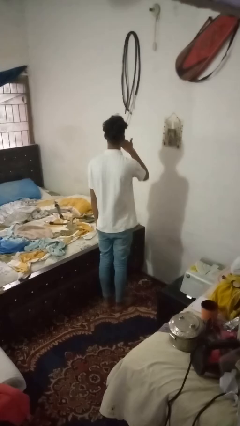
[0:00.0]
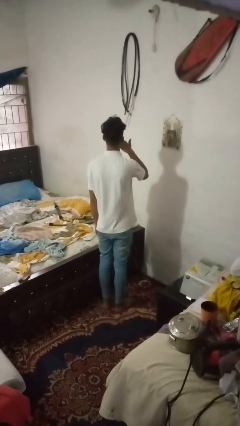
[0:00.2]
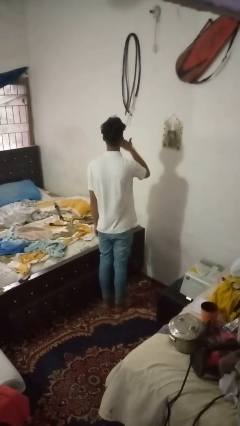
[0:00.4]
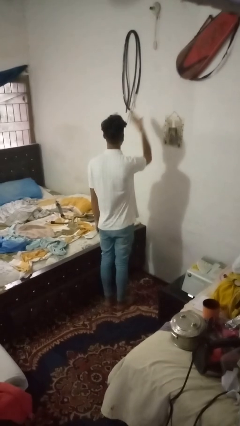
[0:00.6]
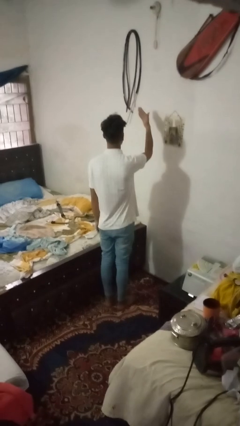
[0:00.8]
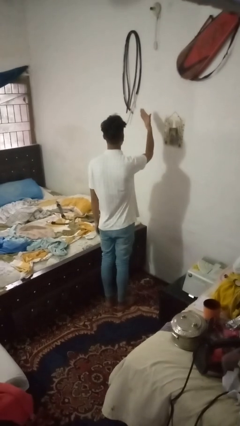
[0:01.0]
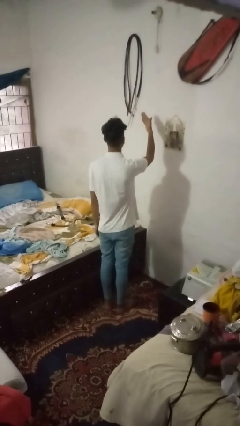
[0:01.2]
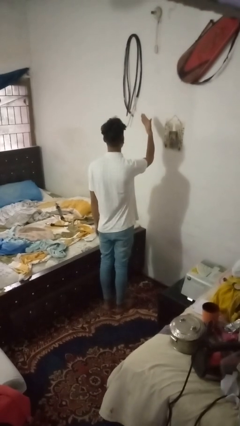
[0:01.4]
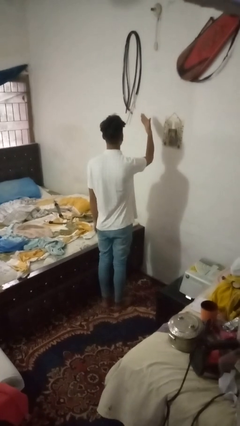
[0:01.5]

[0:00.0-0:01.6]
person gestures blow kiss

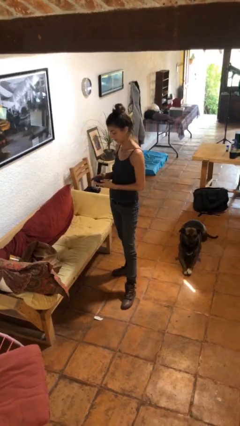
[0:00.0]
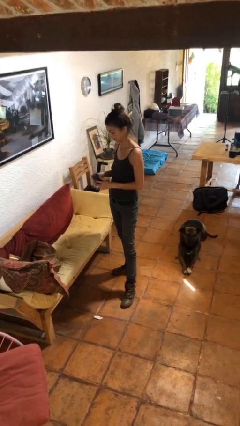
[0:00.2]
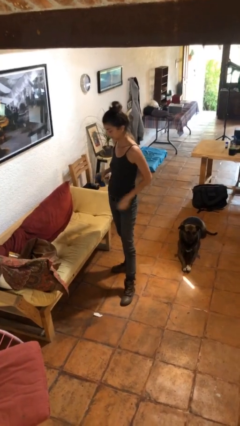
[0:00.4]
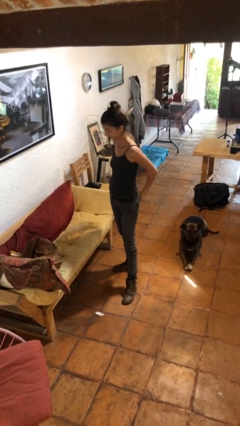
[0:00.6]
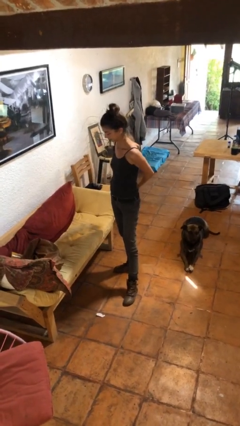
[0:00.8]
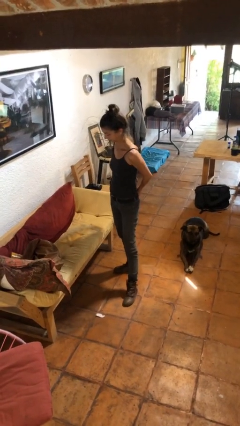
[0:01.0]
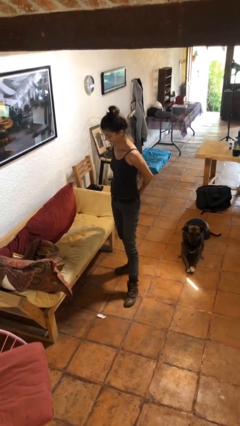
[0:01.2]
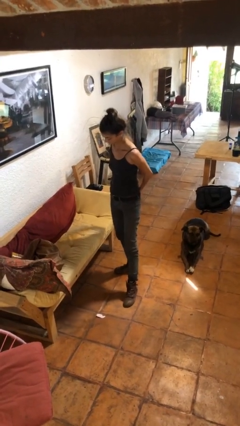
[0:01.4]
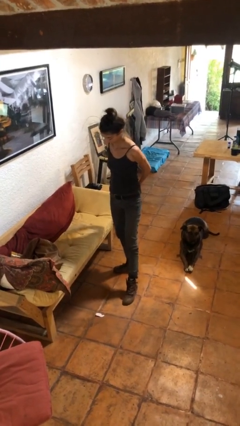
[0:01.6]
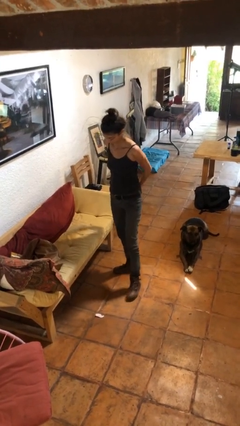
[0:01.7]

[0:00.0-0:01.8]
person puts phone into pocket

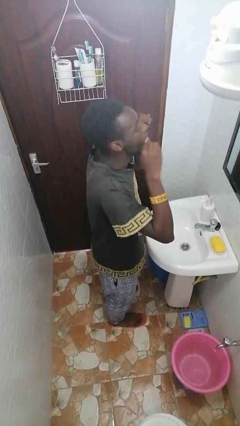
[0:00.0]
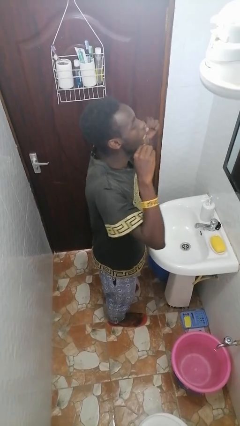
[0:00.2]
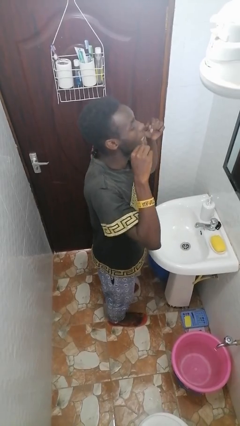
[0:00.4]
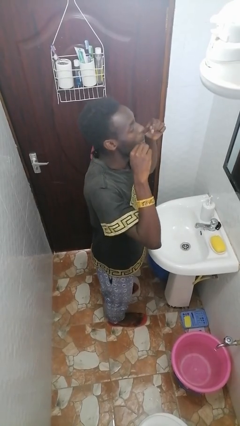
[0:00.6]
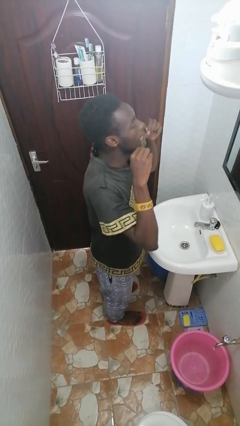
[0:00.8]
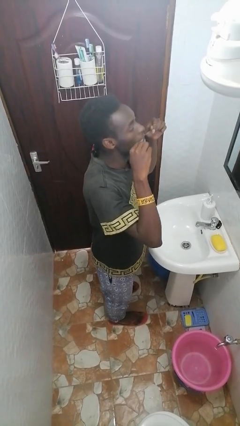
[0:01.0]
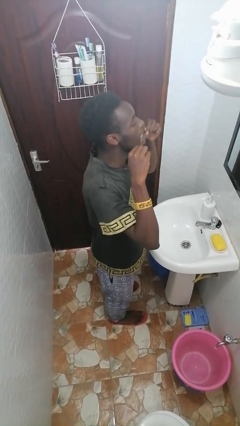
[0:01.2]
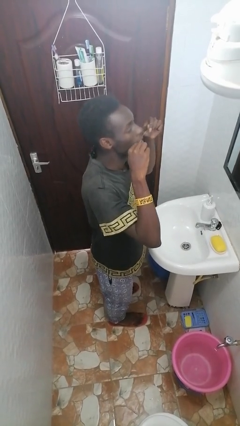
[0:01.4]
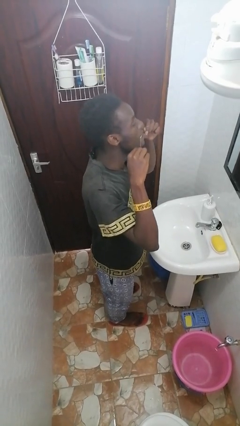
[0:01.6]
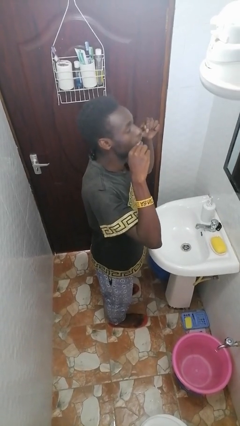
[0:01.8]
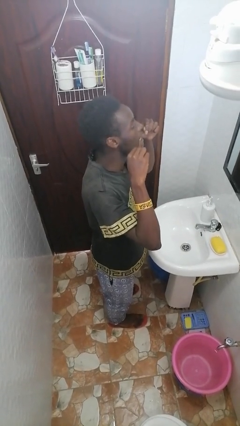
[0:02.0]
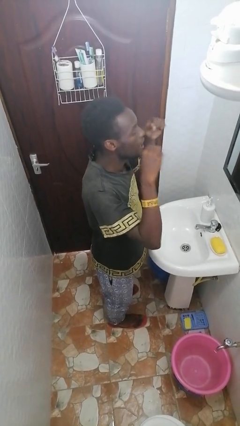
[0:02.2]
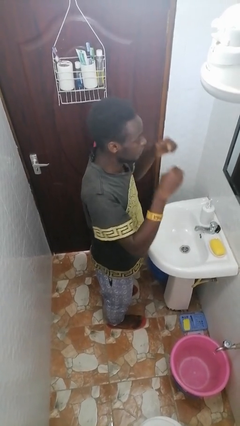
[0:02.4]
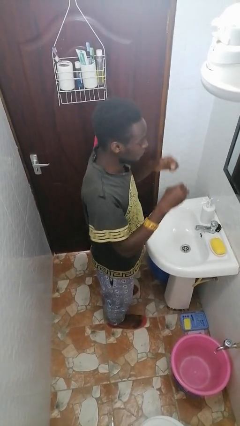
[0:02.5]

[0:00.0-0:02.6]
person flosses

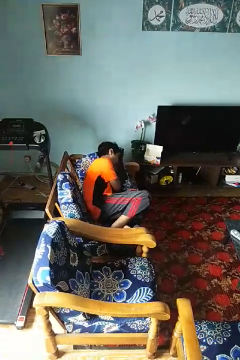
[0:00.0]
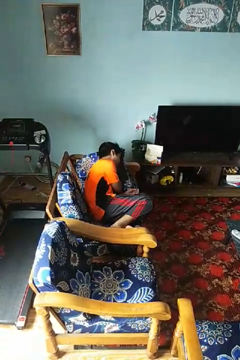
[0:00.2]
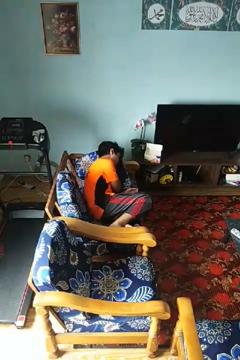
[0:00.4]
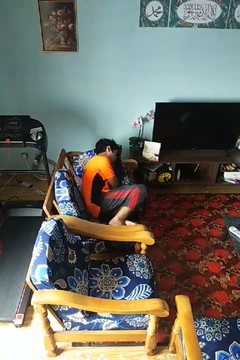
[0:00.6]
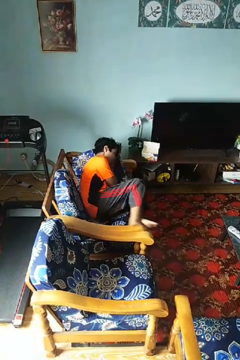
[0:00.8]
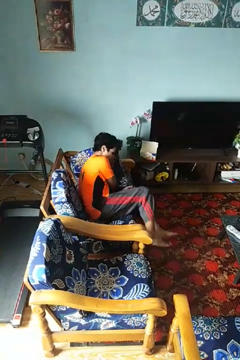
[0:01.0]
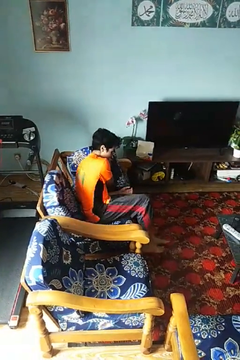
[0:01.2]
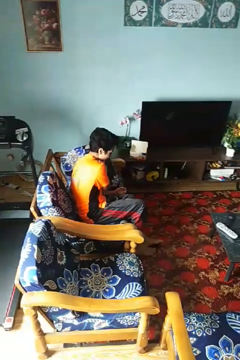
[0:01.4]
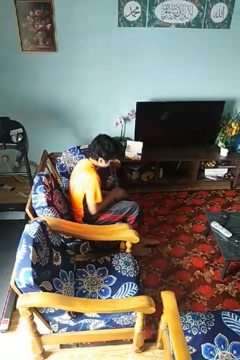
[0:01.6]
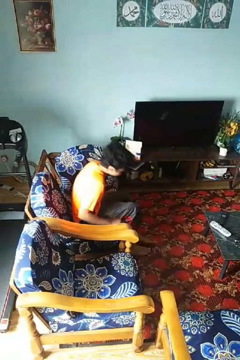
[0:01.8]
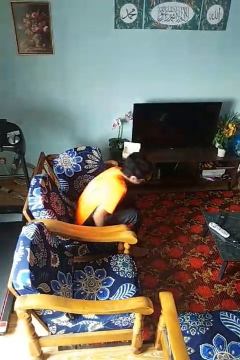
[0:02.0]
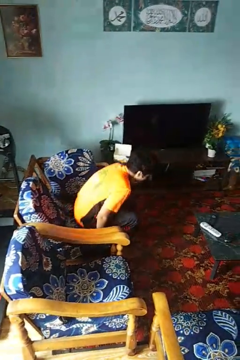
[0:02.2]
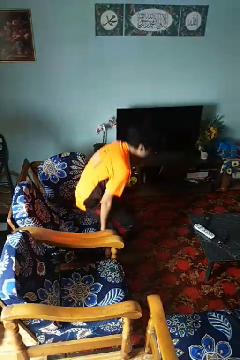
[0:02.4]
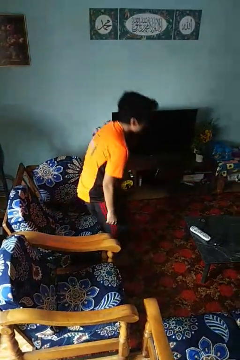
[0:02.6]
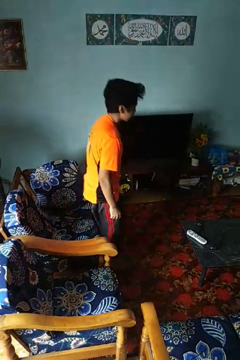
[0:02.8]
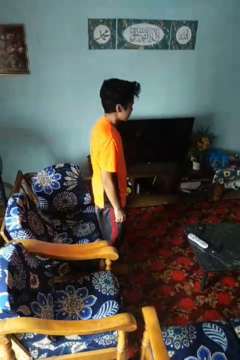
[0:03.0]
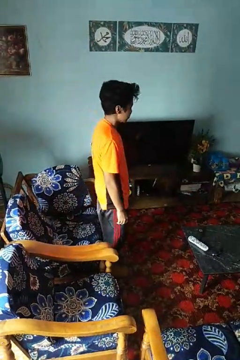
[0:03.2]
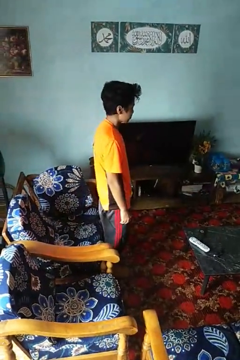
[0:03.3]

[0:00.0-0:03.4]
person stands up

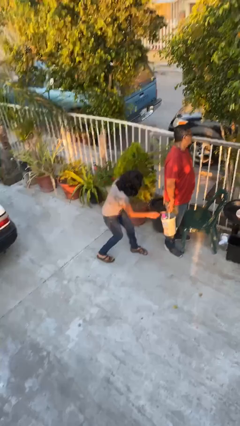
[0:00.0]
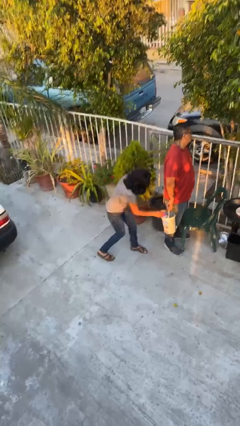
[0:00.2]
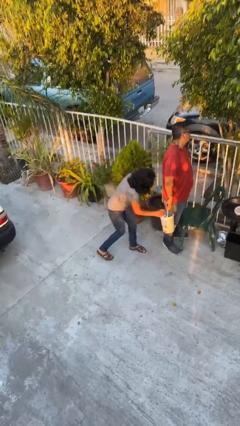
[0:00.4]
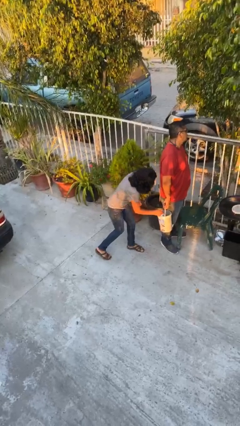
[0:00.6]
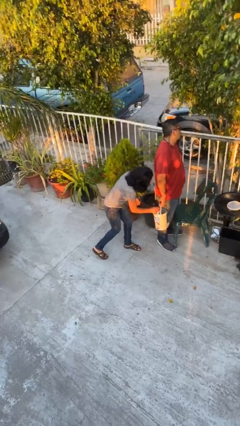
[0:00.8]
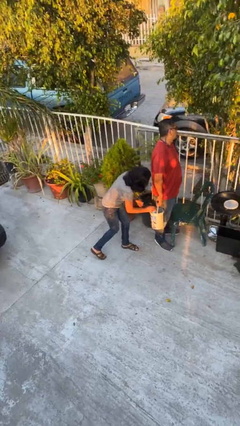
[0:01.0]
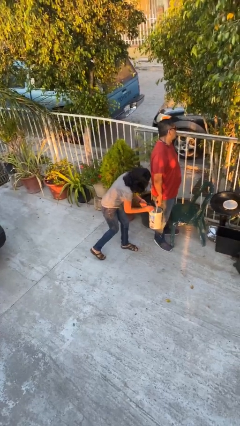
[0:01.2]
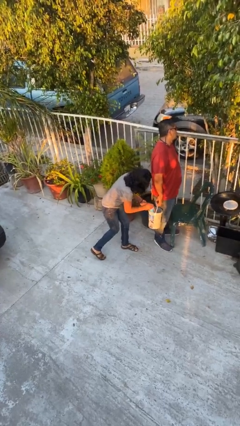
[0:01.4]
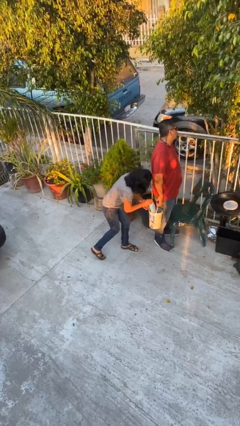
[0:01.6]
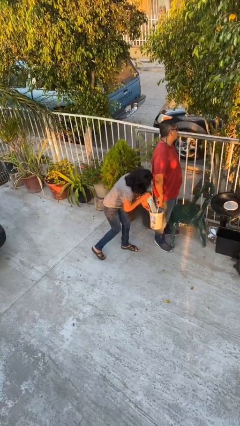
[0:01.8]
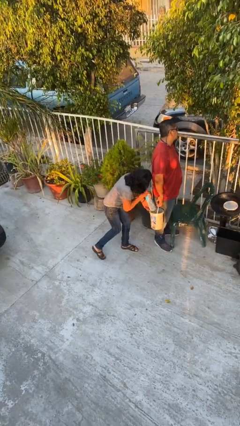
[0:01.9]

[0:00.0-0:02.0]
person steals object from person

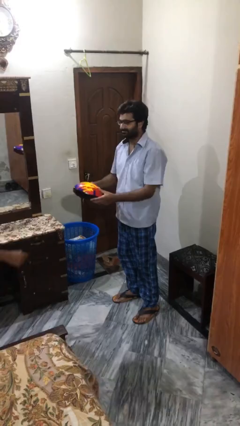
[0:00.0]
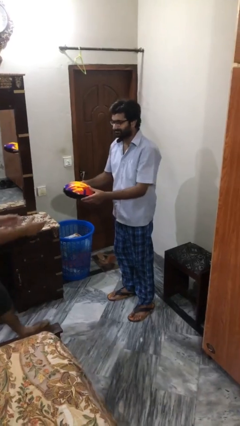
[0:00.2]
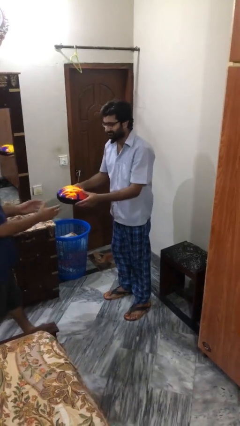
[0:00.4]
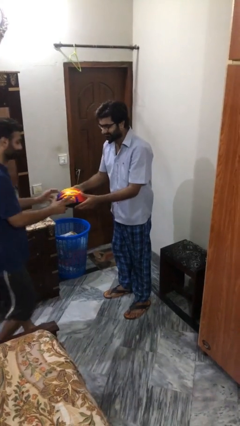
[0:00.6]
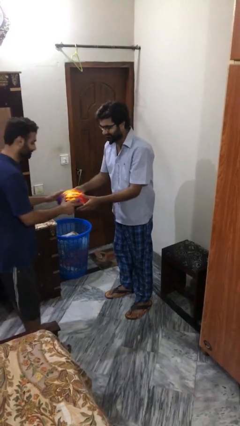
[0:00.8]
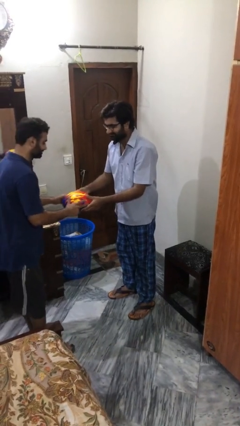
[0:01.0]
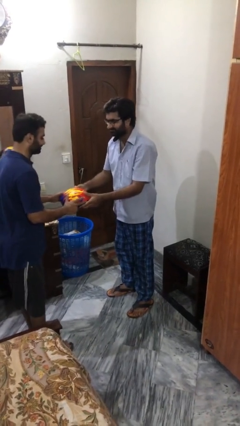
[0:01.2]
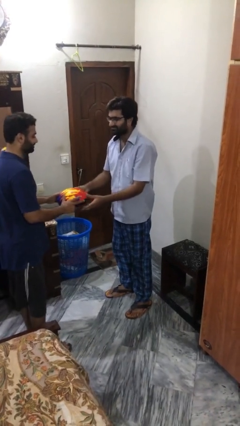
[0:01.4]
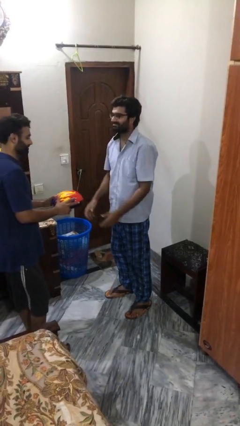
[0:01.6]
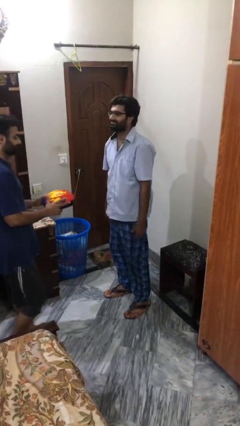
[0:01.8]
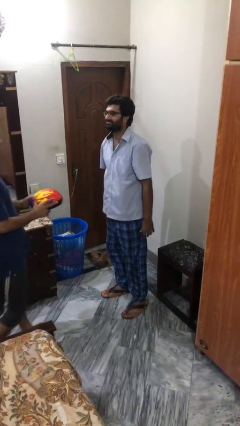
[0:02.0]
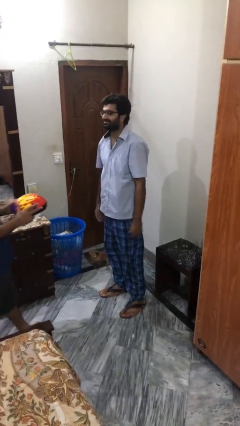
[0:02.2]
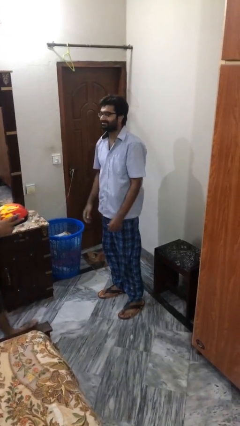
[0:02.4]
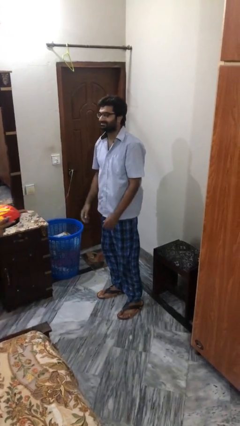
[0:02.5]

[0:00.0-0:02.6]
person transfers object to person

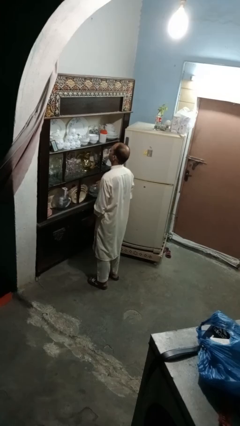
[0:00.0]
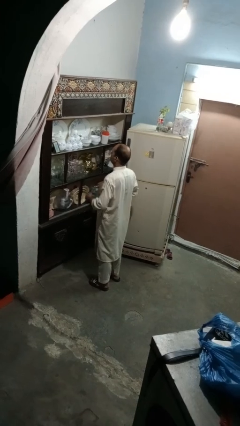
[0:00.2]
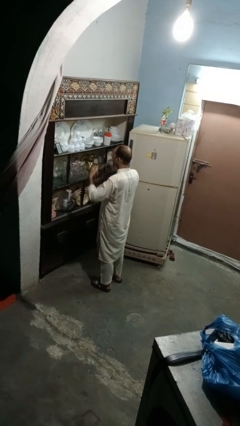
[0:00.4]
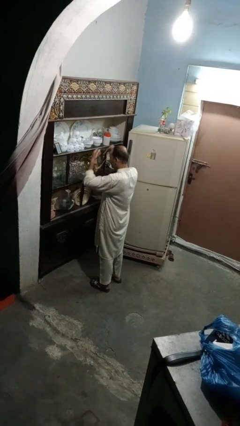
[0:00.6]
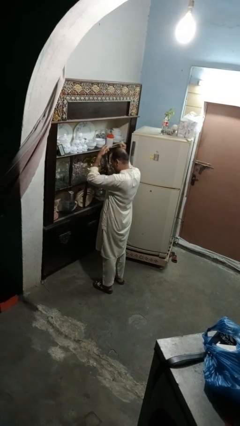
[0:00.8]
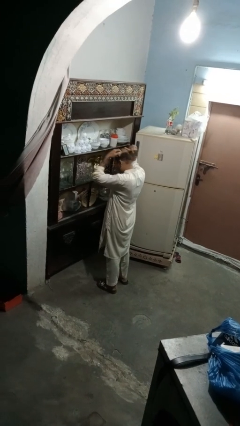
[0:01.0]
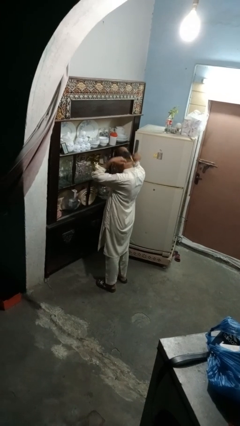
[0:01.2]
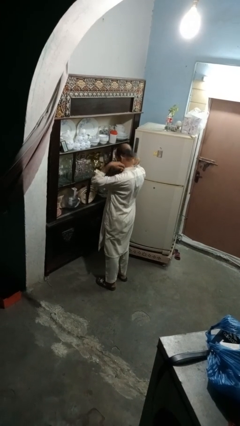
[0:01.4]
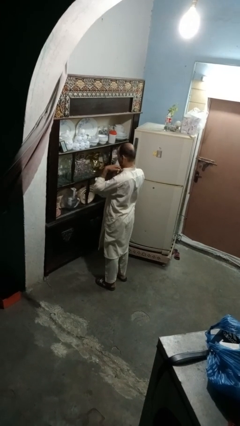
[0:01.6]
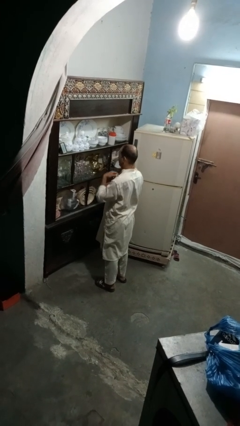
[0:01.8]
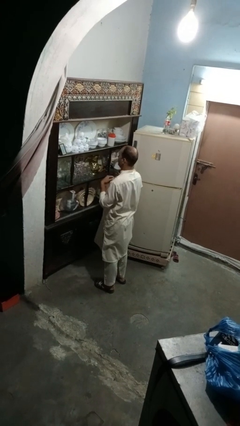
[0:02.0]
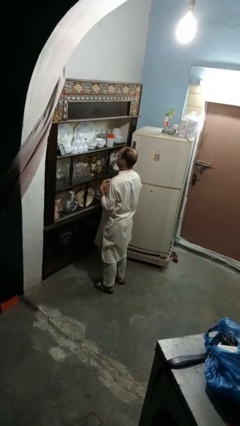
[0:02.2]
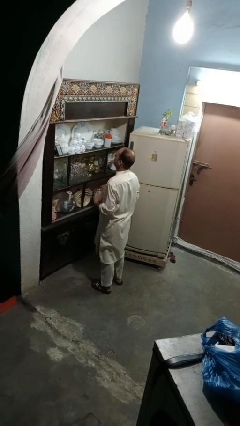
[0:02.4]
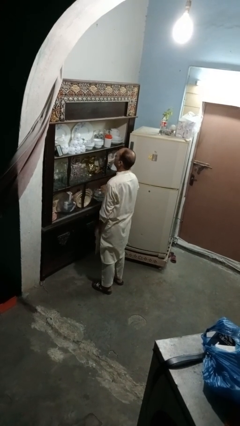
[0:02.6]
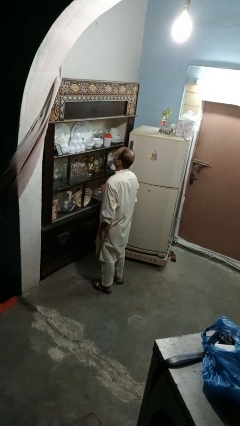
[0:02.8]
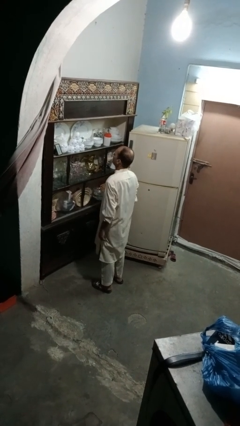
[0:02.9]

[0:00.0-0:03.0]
person puts on necklace

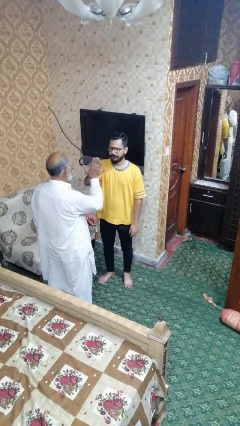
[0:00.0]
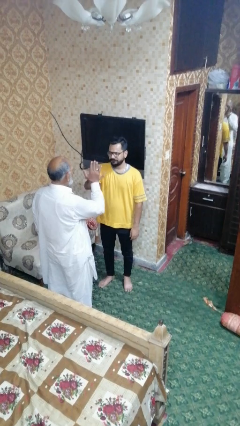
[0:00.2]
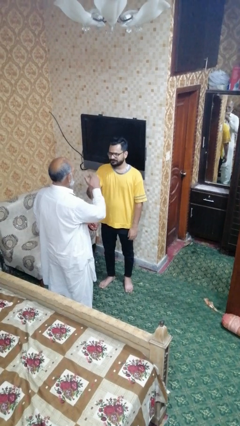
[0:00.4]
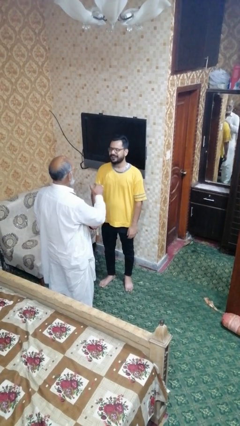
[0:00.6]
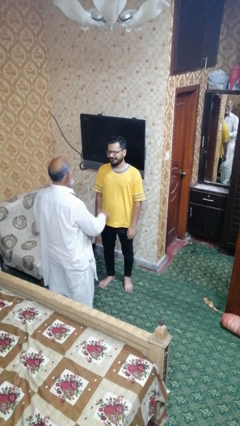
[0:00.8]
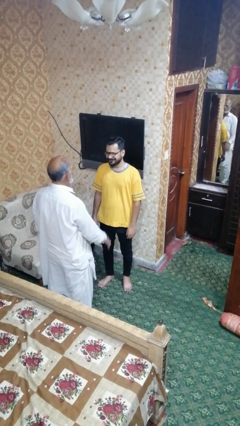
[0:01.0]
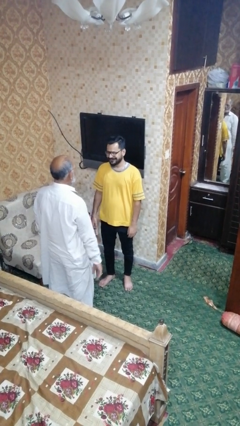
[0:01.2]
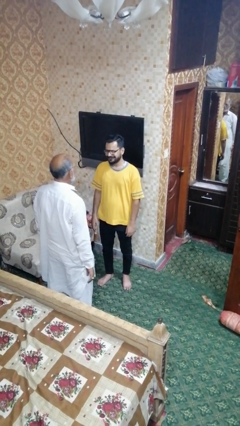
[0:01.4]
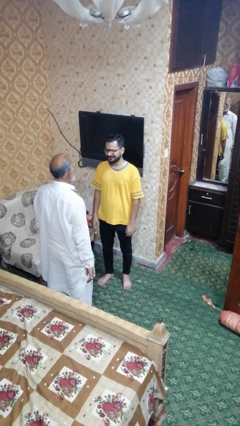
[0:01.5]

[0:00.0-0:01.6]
person highfives hand
